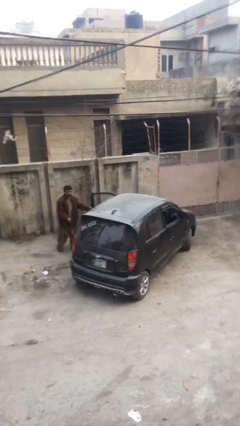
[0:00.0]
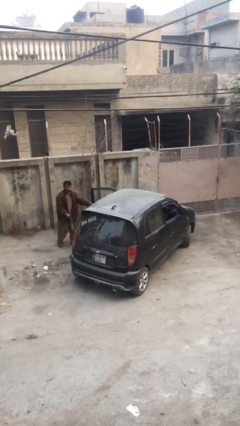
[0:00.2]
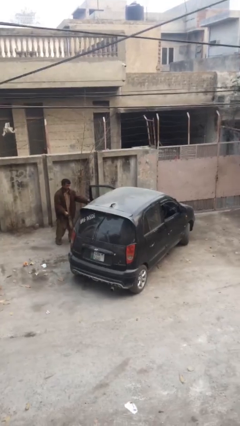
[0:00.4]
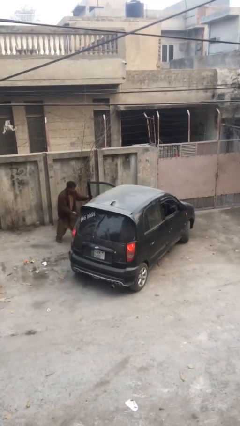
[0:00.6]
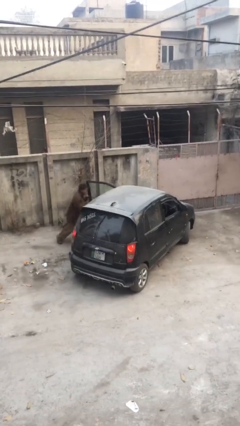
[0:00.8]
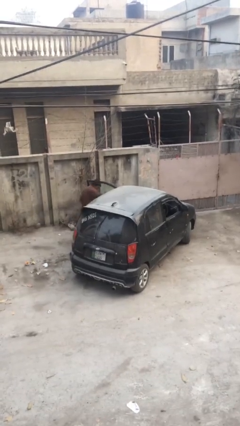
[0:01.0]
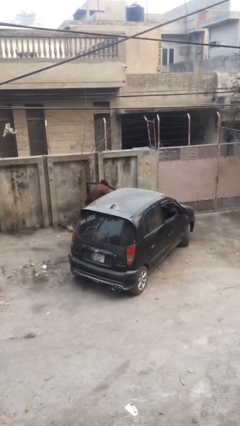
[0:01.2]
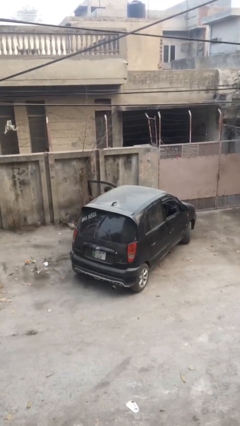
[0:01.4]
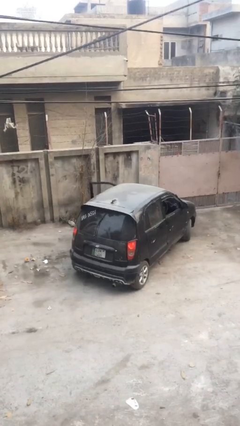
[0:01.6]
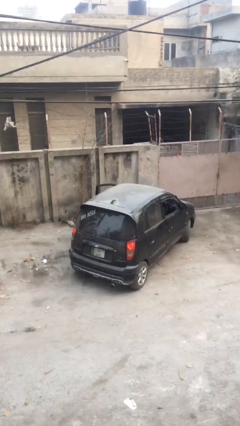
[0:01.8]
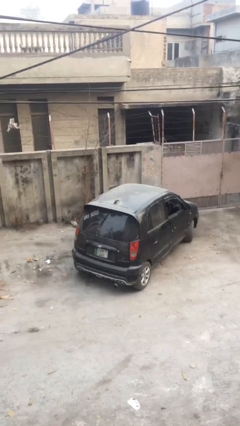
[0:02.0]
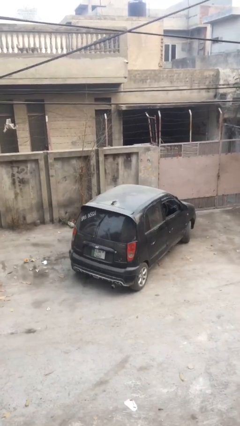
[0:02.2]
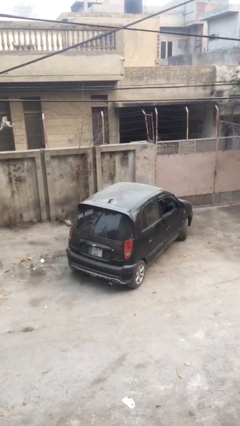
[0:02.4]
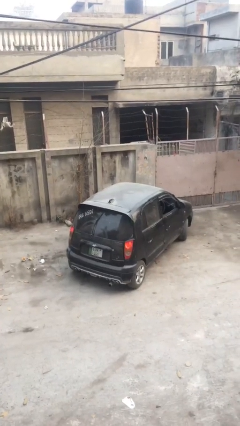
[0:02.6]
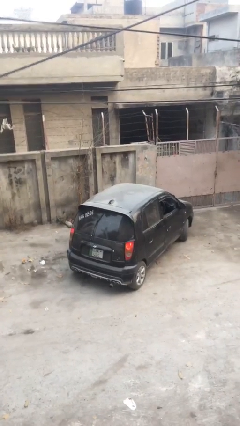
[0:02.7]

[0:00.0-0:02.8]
car picks up person

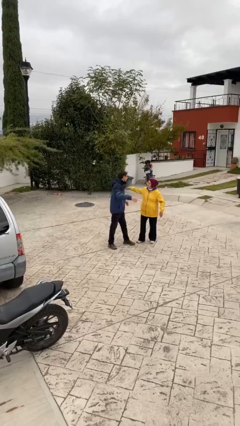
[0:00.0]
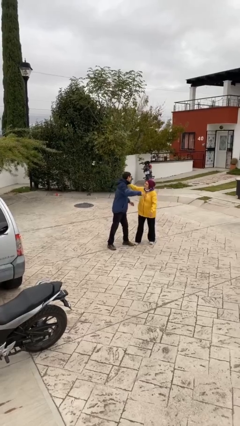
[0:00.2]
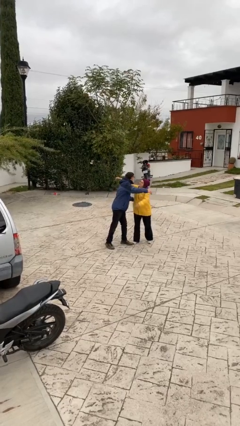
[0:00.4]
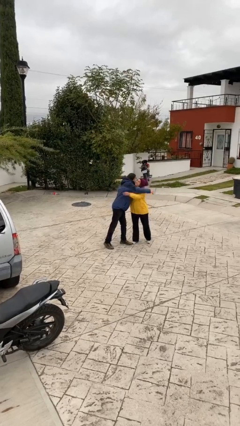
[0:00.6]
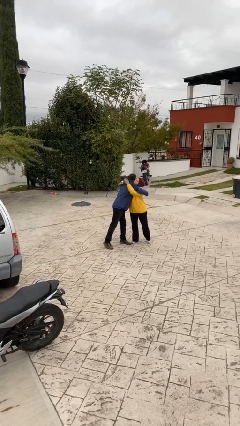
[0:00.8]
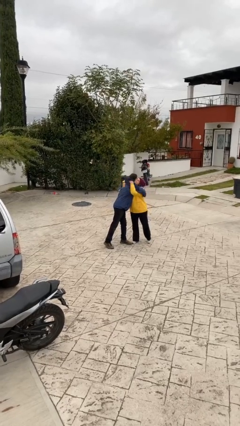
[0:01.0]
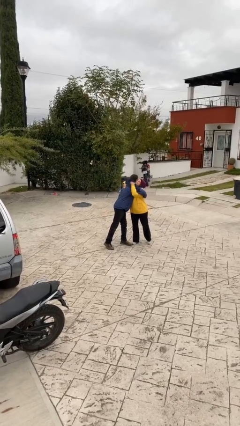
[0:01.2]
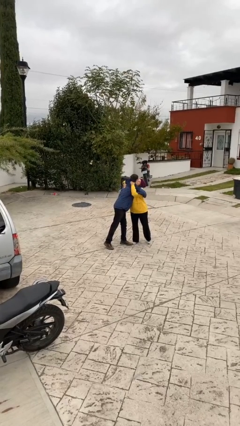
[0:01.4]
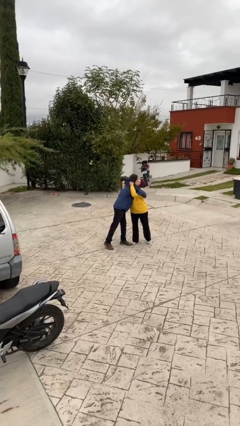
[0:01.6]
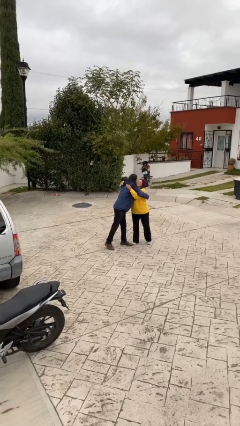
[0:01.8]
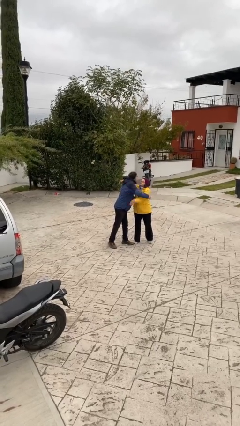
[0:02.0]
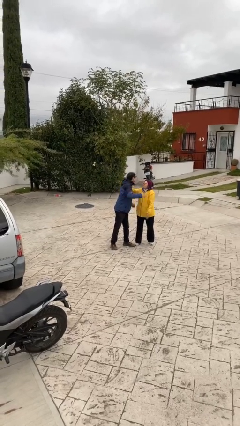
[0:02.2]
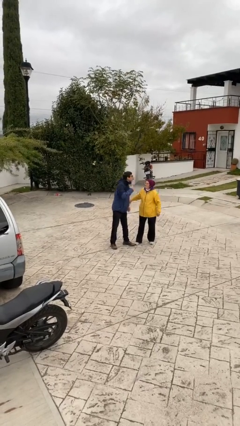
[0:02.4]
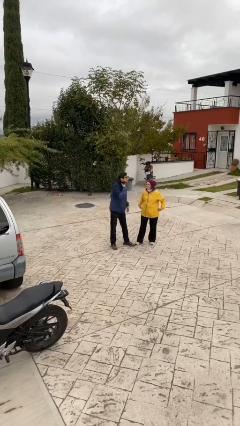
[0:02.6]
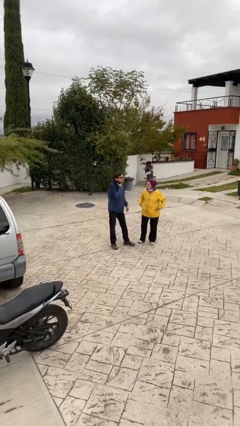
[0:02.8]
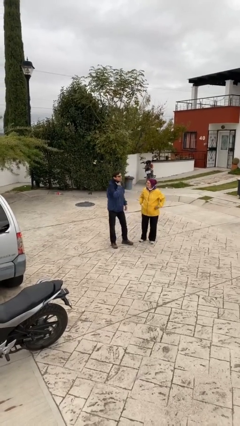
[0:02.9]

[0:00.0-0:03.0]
person embraces person

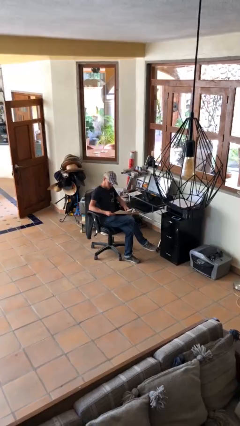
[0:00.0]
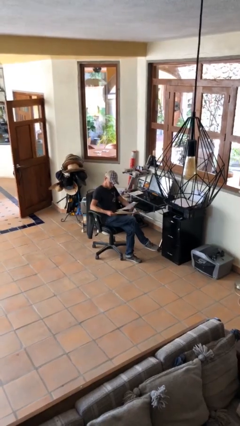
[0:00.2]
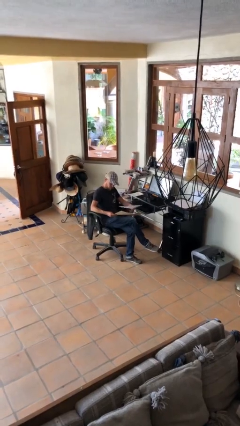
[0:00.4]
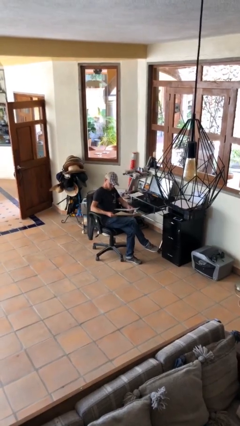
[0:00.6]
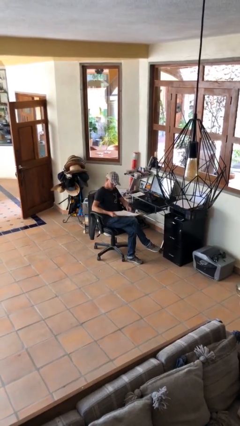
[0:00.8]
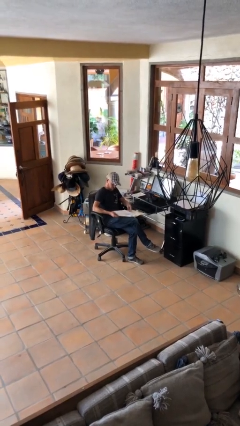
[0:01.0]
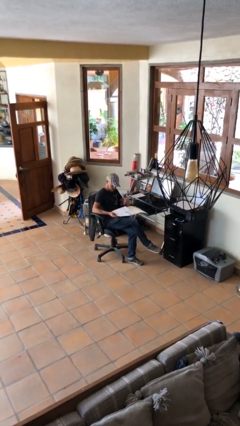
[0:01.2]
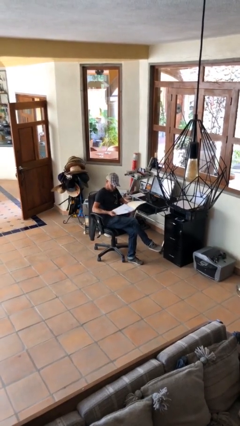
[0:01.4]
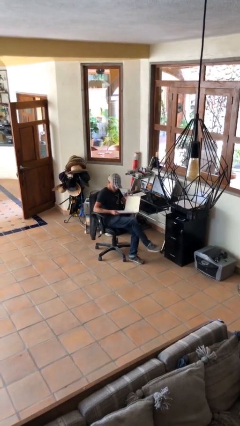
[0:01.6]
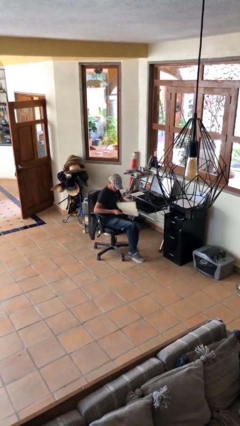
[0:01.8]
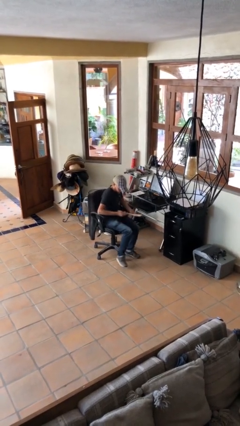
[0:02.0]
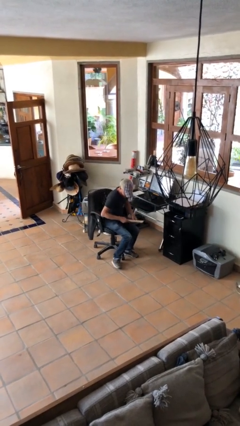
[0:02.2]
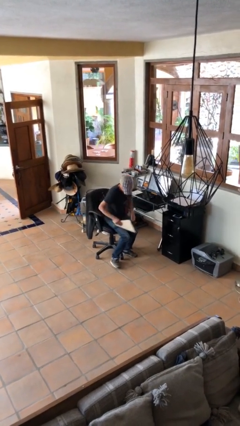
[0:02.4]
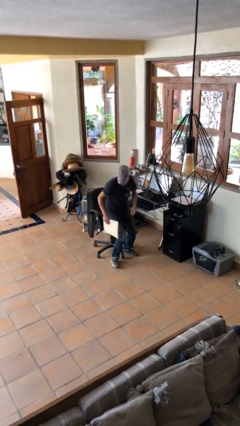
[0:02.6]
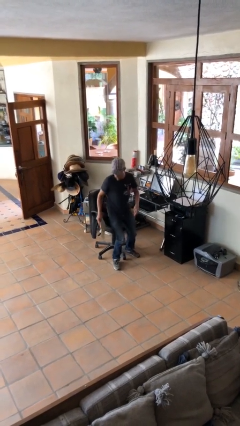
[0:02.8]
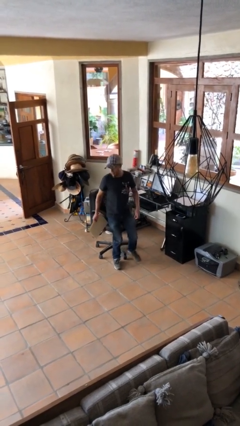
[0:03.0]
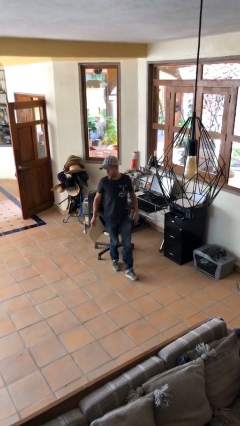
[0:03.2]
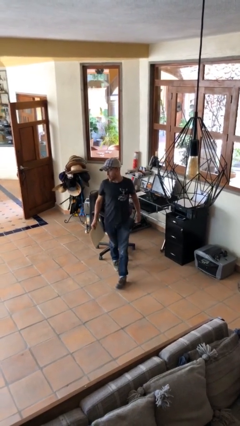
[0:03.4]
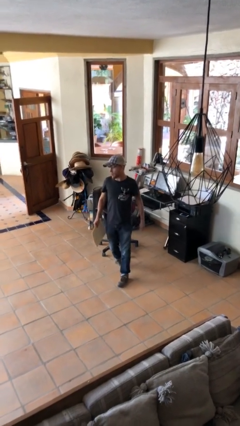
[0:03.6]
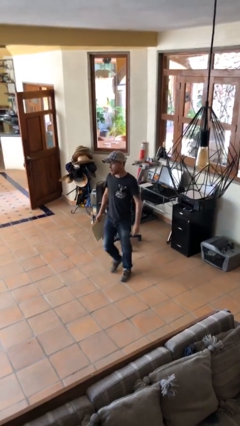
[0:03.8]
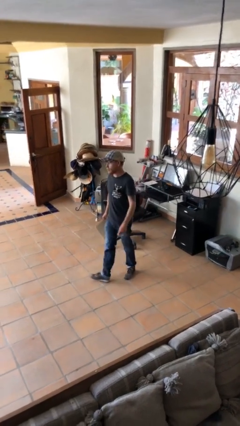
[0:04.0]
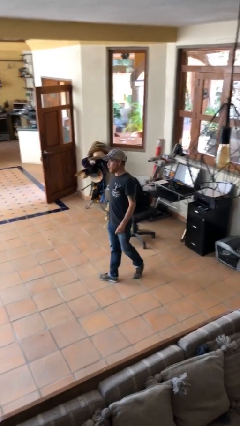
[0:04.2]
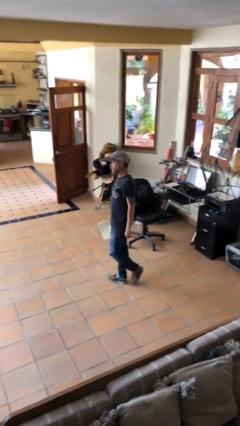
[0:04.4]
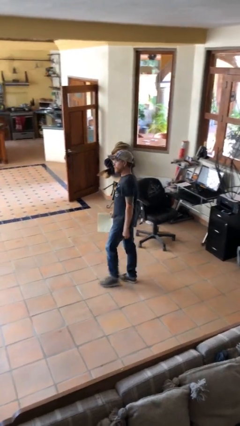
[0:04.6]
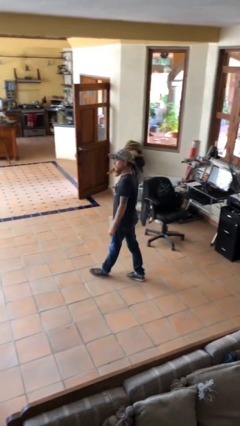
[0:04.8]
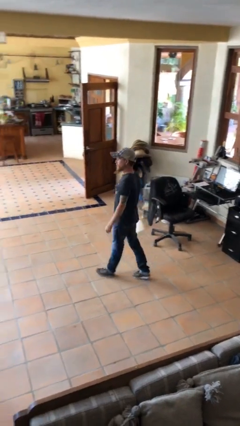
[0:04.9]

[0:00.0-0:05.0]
person stands up

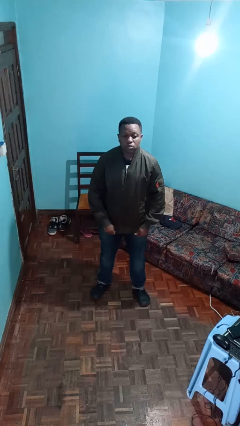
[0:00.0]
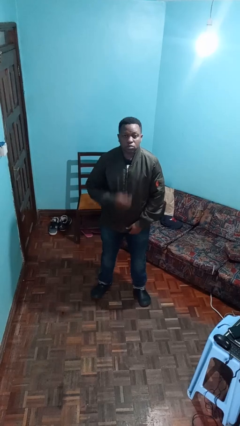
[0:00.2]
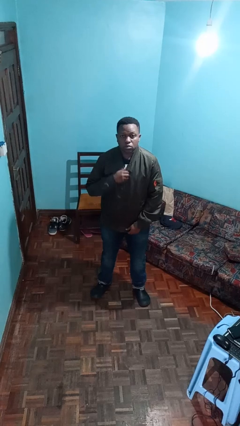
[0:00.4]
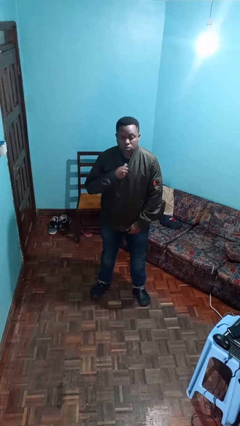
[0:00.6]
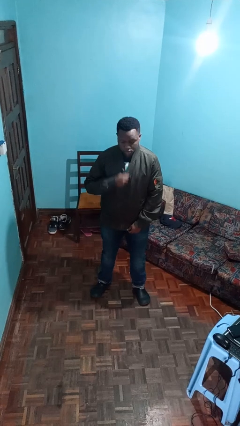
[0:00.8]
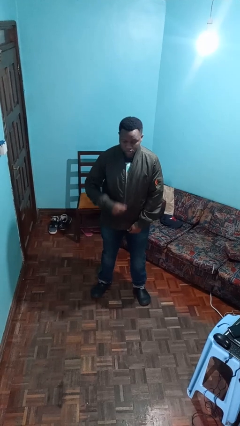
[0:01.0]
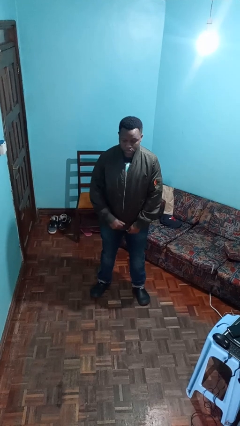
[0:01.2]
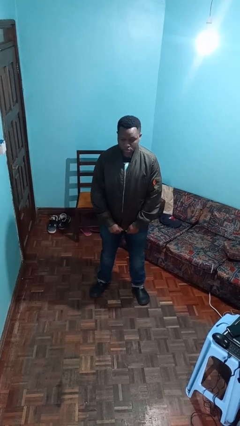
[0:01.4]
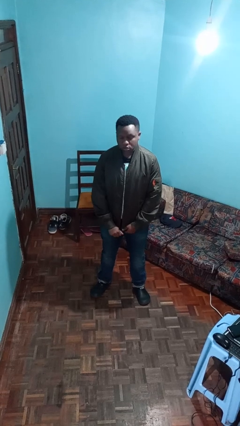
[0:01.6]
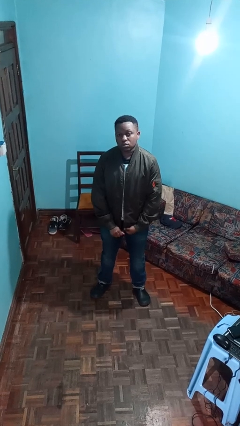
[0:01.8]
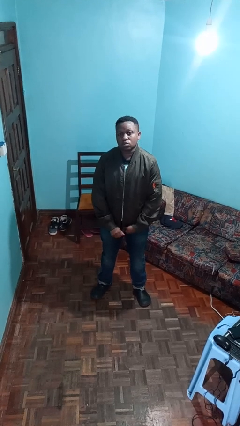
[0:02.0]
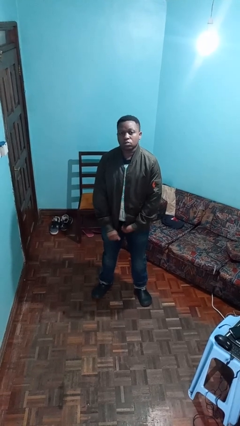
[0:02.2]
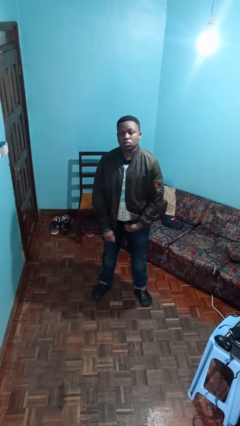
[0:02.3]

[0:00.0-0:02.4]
person unzips jacket

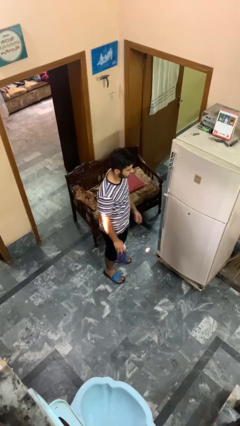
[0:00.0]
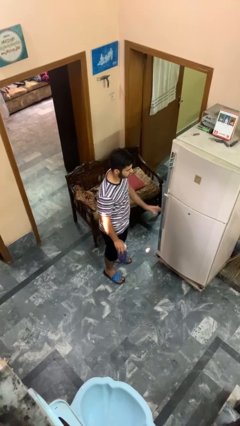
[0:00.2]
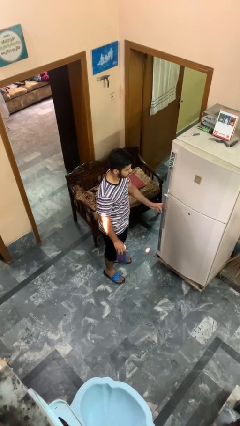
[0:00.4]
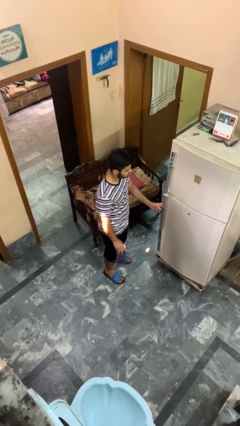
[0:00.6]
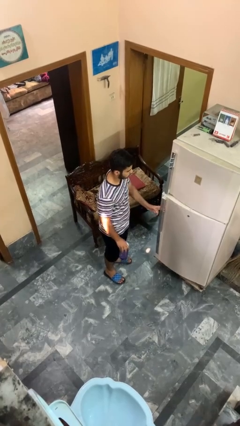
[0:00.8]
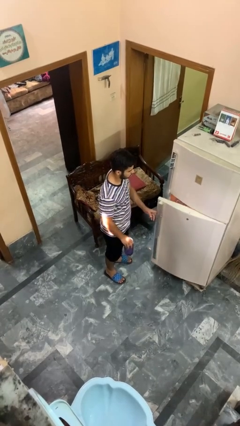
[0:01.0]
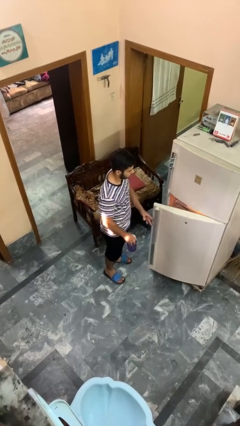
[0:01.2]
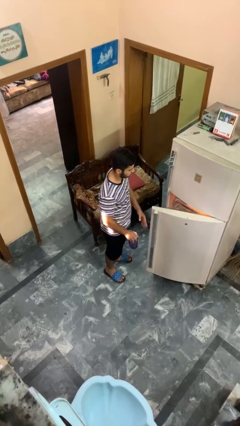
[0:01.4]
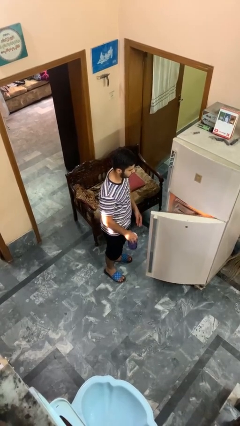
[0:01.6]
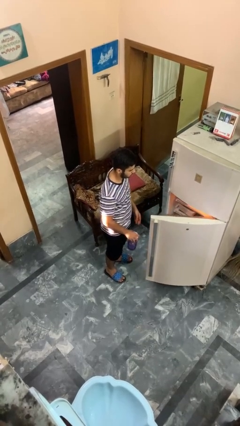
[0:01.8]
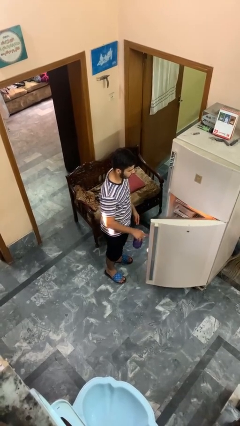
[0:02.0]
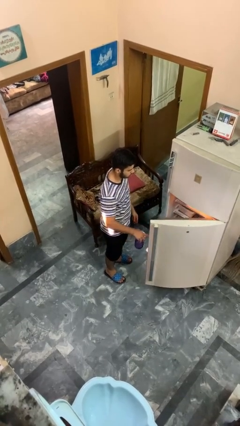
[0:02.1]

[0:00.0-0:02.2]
person opens refrigerator

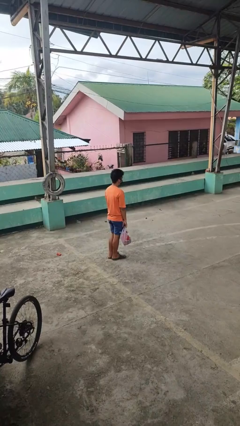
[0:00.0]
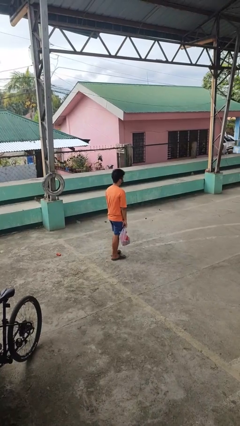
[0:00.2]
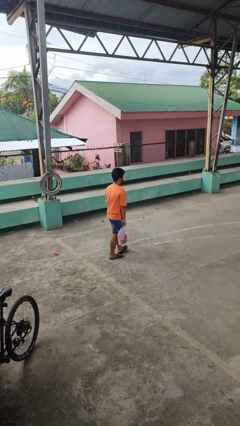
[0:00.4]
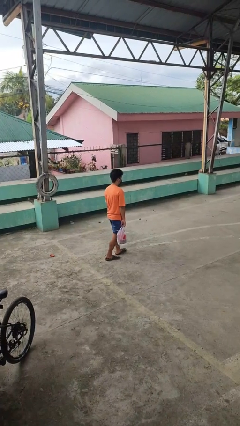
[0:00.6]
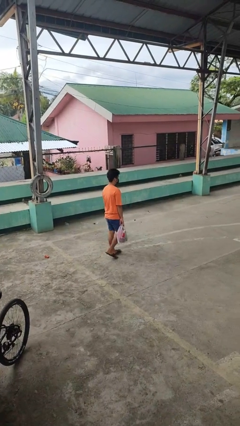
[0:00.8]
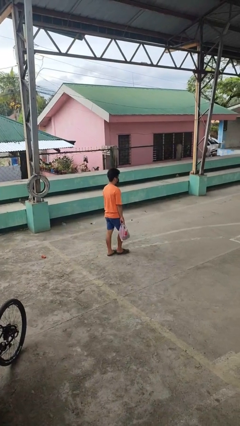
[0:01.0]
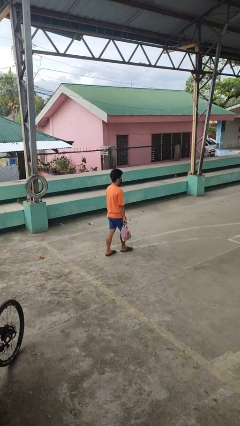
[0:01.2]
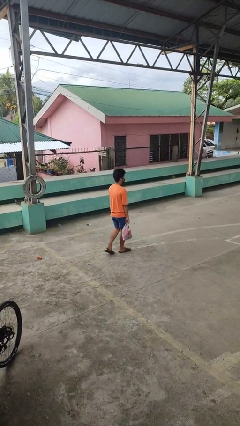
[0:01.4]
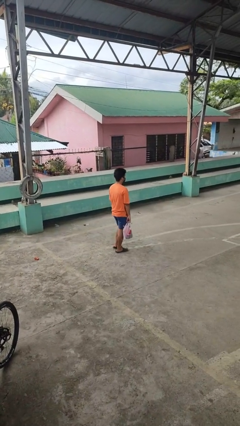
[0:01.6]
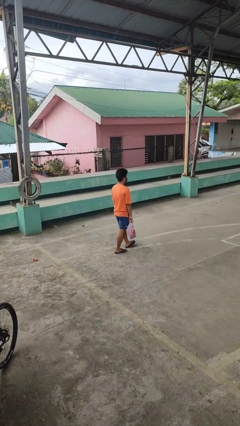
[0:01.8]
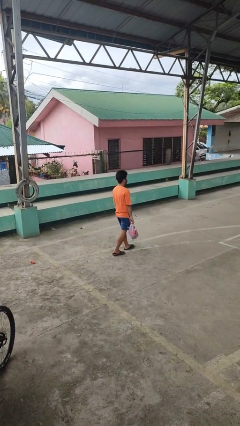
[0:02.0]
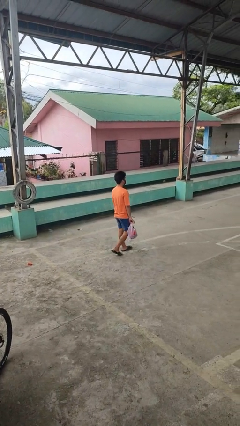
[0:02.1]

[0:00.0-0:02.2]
person carries groceries
